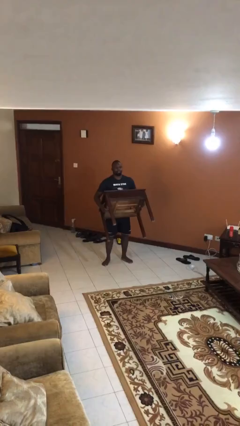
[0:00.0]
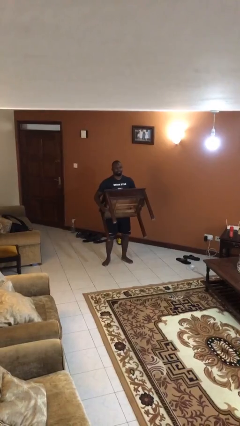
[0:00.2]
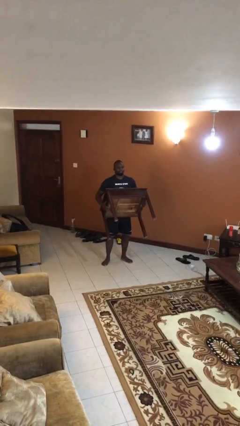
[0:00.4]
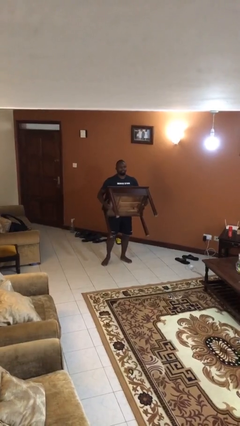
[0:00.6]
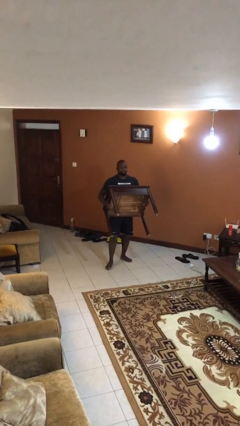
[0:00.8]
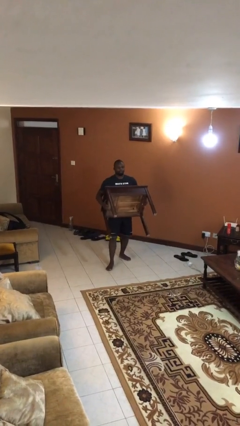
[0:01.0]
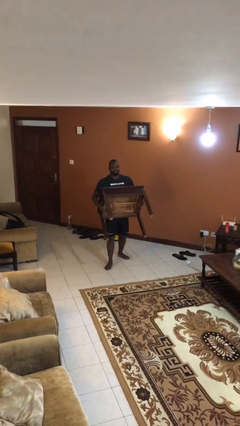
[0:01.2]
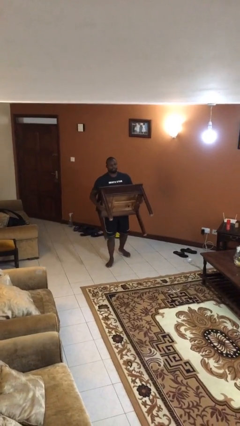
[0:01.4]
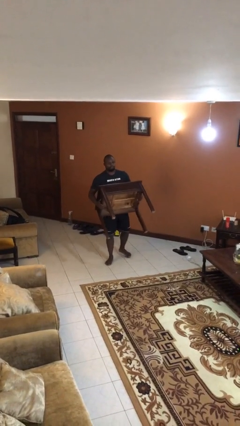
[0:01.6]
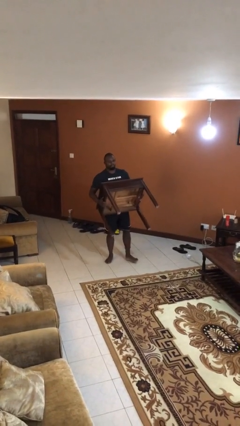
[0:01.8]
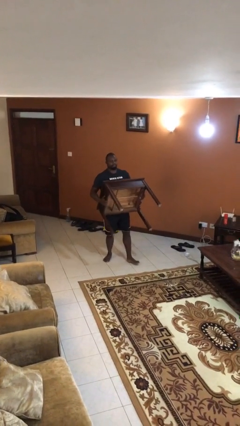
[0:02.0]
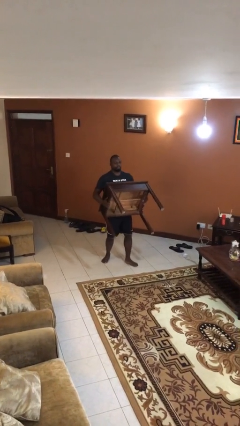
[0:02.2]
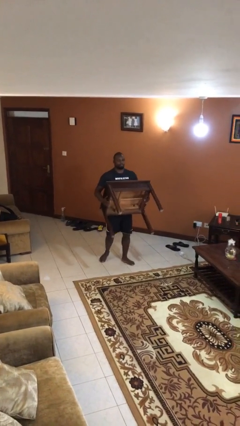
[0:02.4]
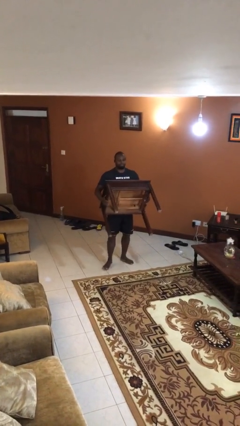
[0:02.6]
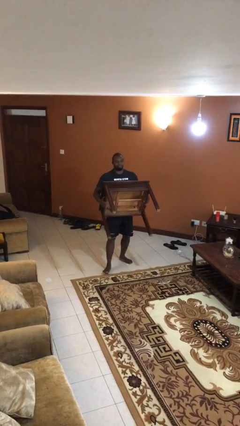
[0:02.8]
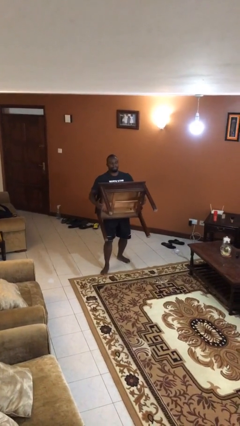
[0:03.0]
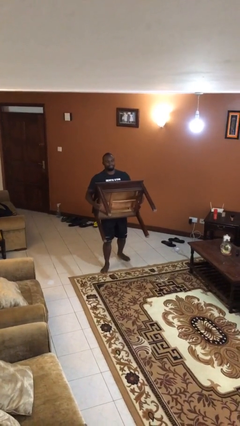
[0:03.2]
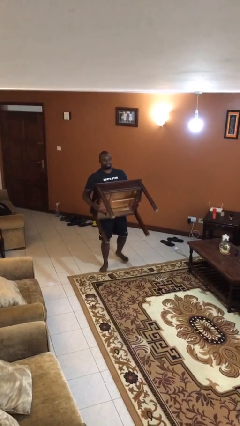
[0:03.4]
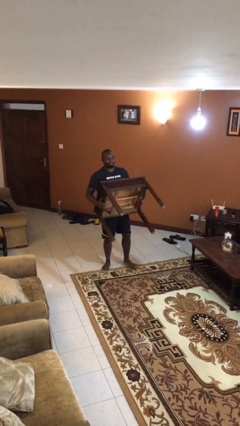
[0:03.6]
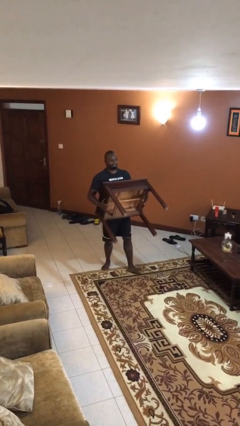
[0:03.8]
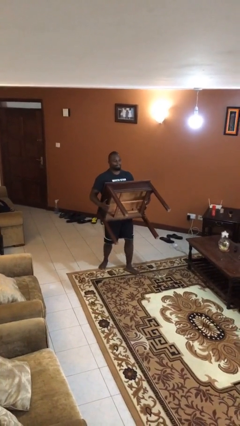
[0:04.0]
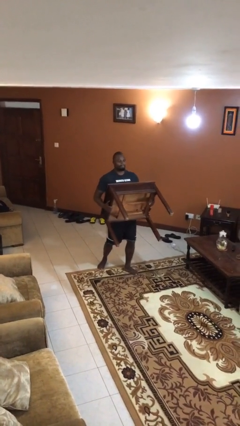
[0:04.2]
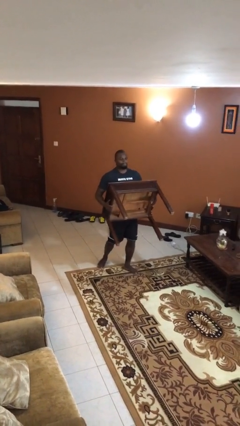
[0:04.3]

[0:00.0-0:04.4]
person carries heavy object

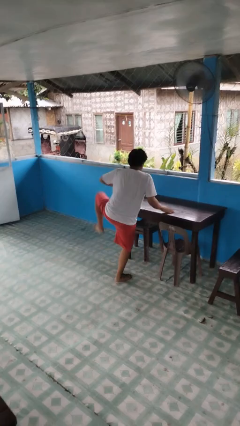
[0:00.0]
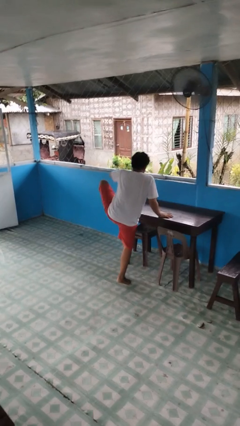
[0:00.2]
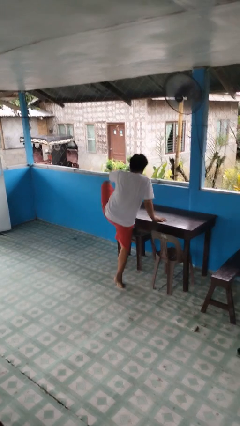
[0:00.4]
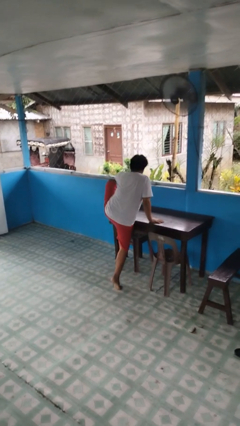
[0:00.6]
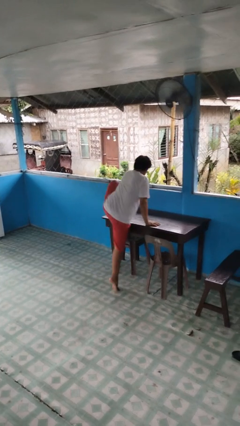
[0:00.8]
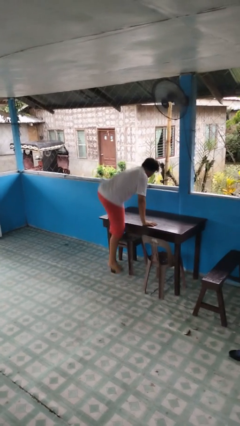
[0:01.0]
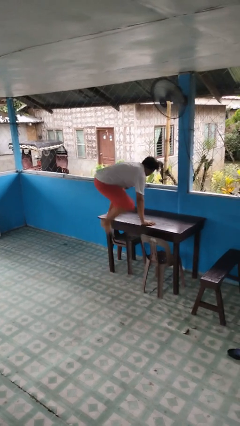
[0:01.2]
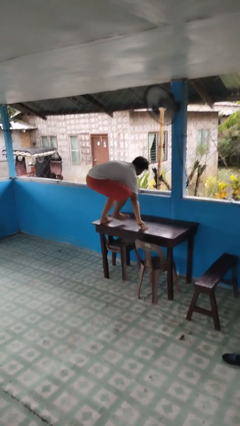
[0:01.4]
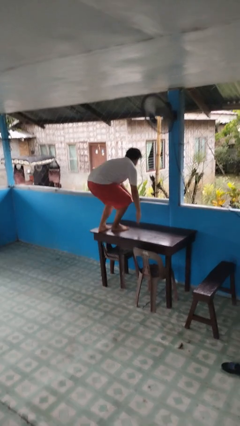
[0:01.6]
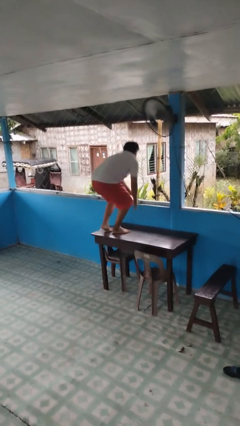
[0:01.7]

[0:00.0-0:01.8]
person climbs on table

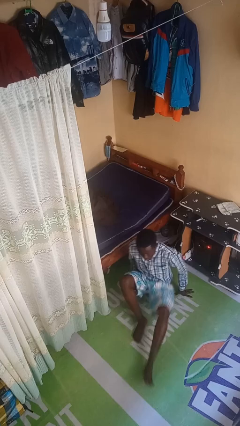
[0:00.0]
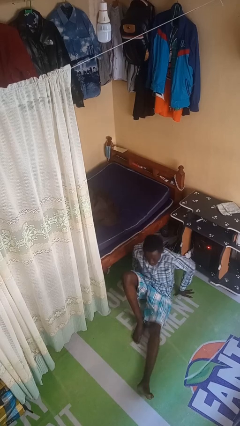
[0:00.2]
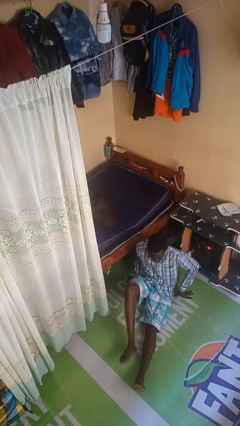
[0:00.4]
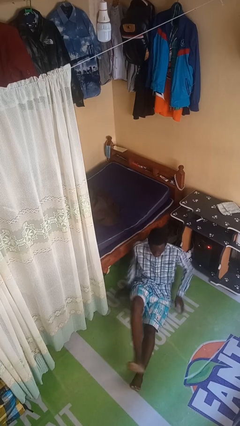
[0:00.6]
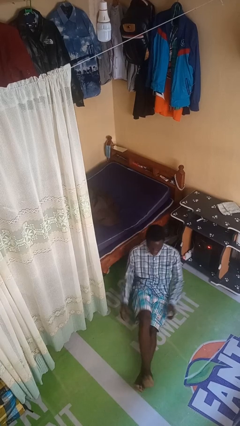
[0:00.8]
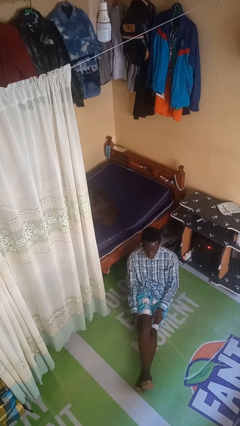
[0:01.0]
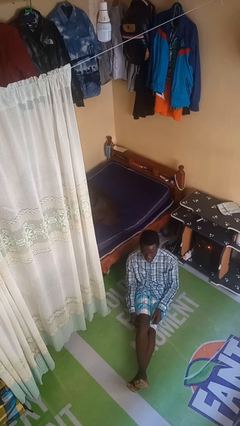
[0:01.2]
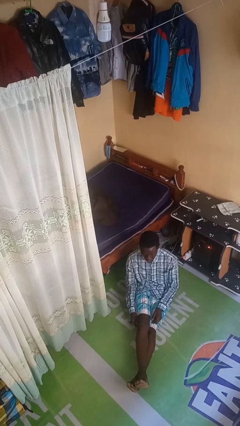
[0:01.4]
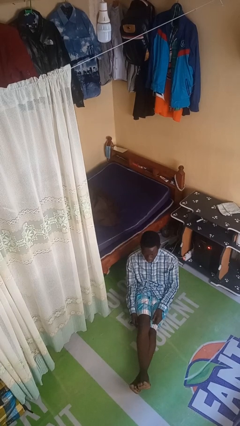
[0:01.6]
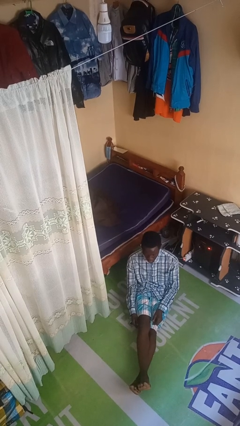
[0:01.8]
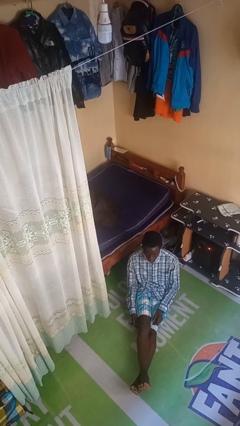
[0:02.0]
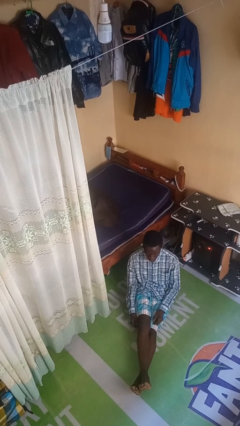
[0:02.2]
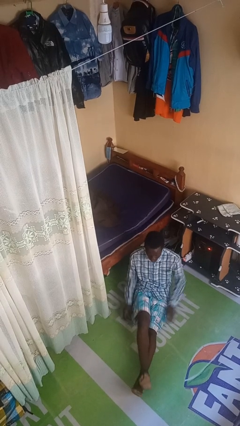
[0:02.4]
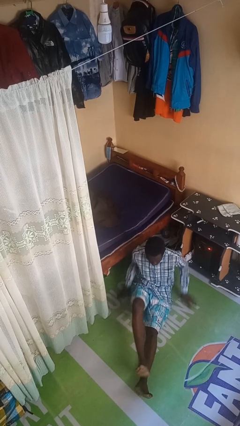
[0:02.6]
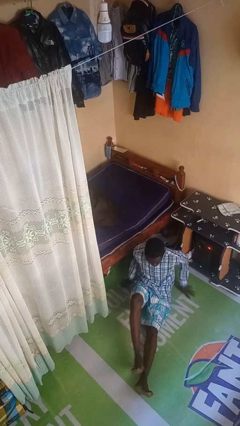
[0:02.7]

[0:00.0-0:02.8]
person sits crisscross

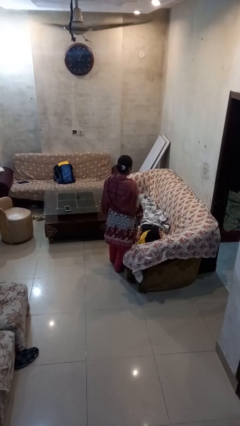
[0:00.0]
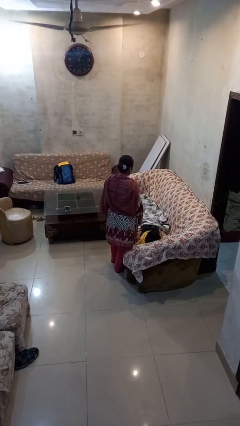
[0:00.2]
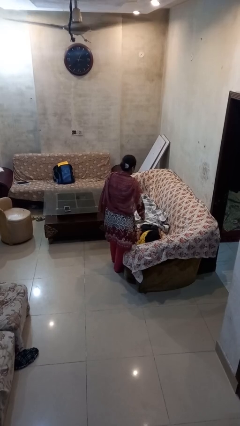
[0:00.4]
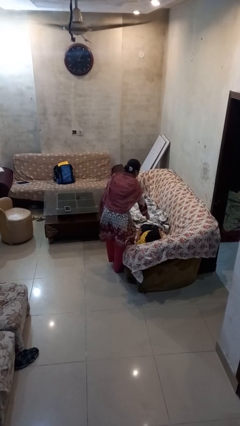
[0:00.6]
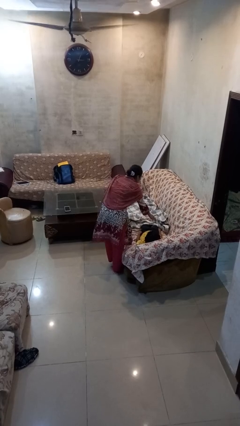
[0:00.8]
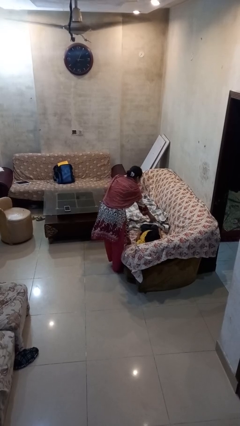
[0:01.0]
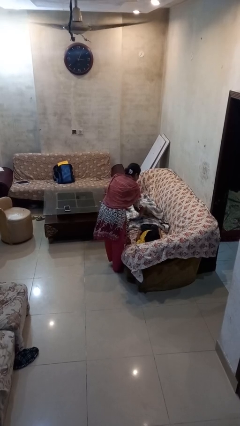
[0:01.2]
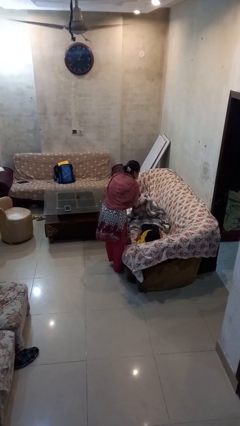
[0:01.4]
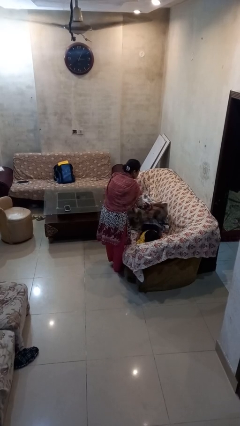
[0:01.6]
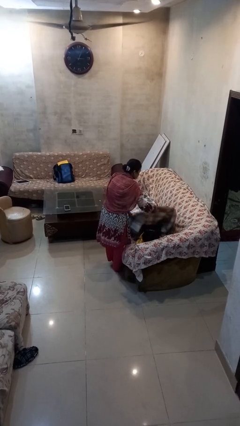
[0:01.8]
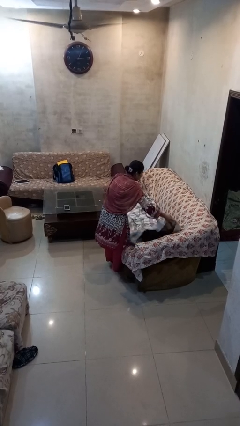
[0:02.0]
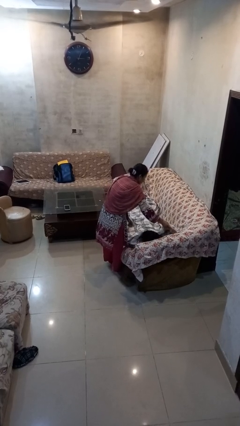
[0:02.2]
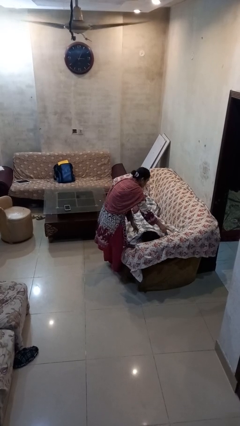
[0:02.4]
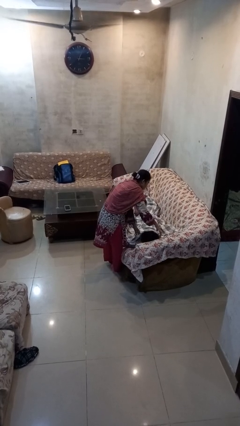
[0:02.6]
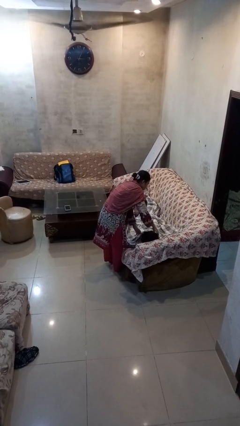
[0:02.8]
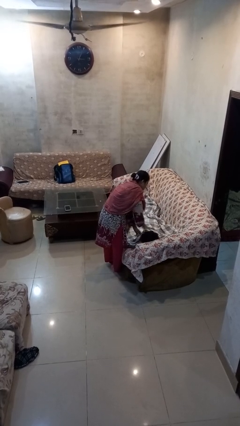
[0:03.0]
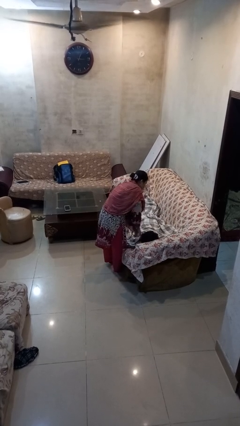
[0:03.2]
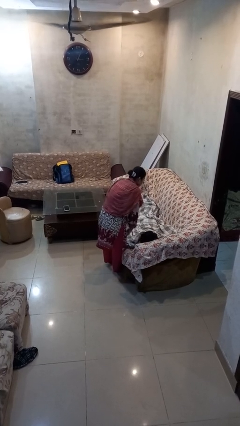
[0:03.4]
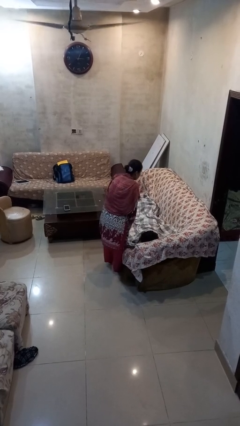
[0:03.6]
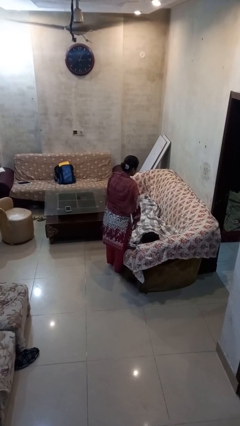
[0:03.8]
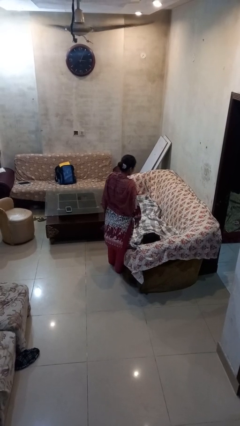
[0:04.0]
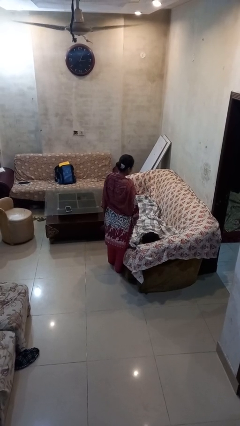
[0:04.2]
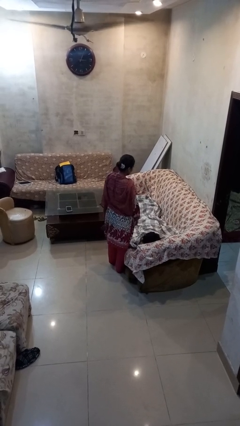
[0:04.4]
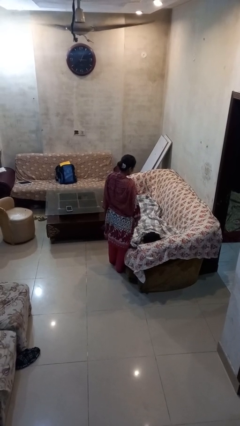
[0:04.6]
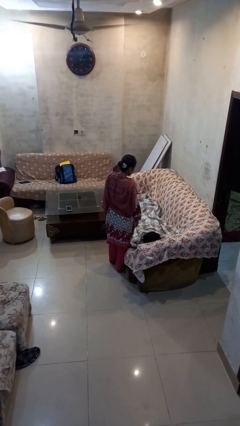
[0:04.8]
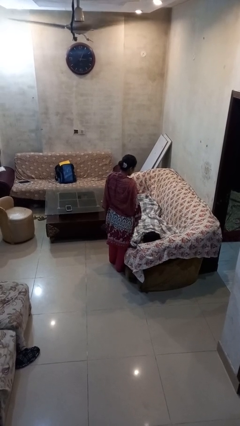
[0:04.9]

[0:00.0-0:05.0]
person covers friend with blanket

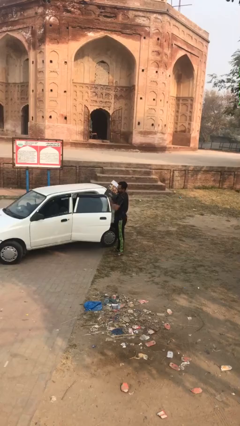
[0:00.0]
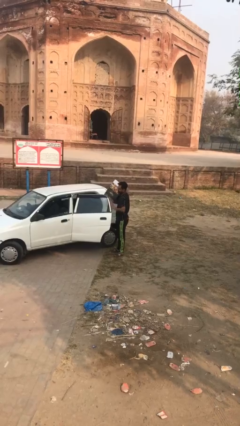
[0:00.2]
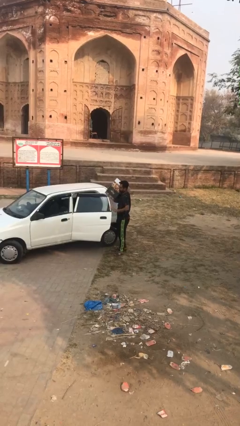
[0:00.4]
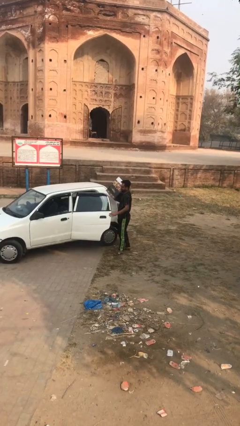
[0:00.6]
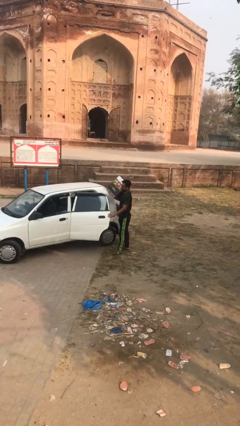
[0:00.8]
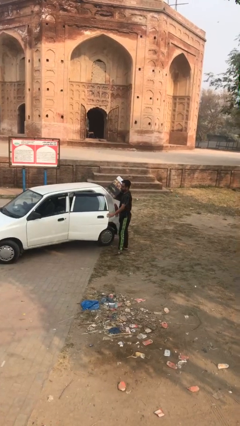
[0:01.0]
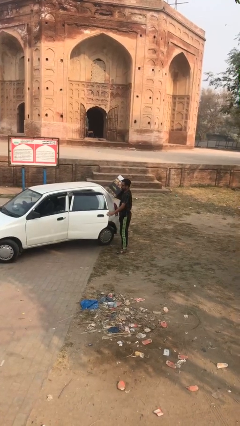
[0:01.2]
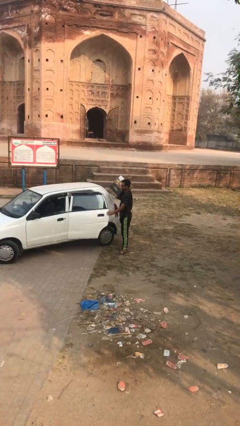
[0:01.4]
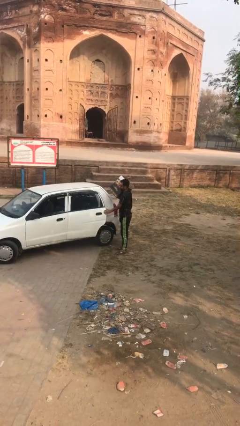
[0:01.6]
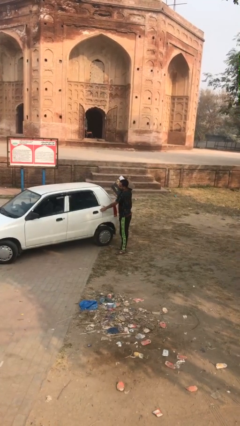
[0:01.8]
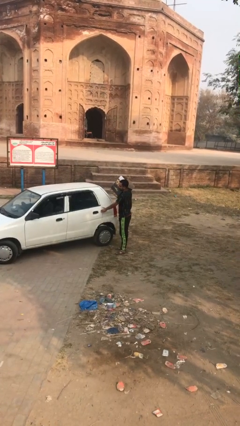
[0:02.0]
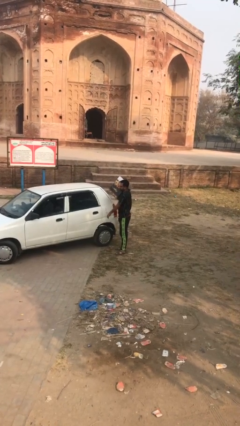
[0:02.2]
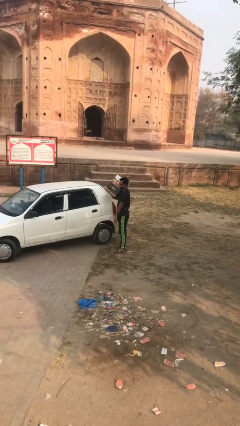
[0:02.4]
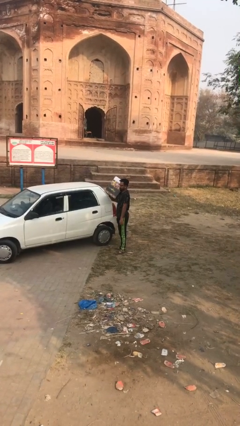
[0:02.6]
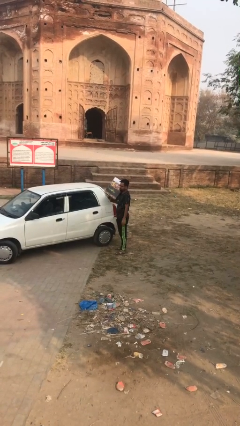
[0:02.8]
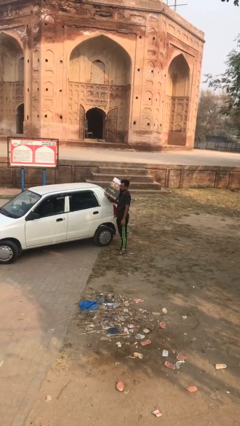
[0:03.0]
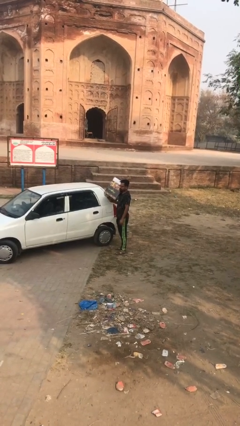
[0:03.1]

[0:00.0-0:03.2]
person closes car door
